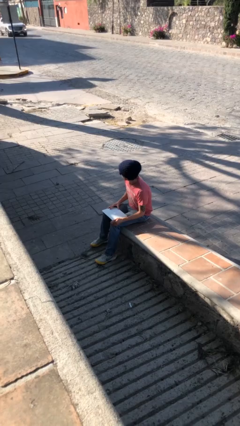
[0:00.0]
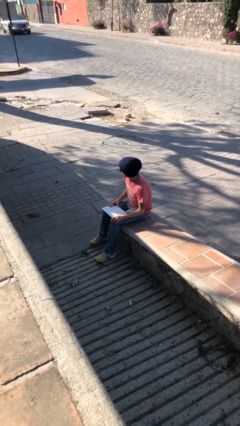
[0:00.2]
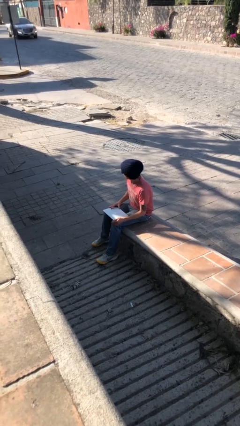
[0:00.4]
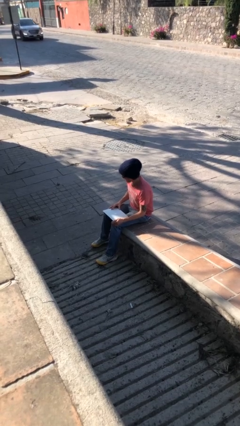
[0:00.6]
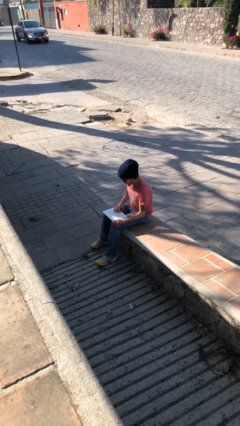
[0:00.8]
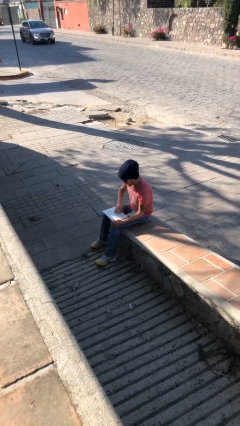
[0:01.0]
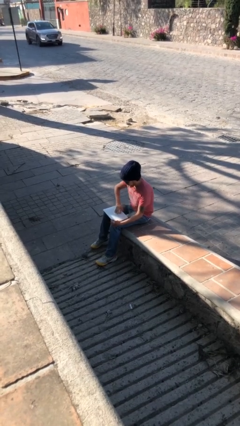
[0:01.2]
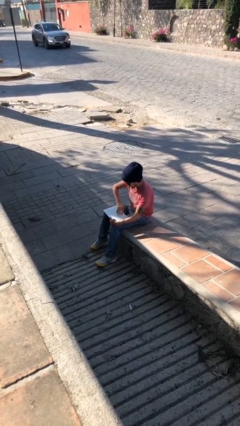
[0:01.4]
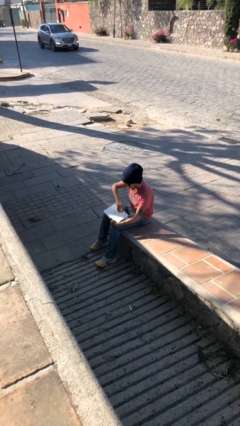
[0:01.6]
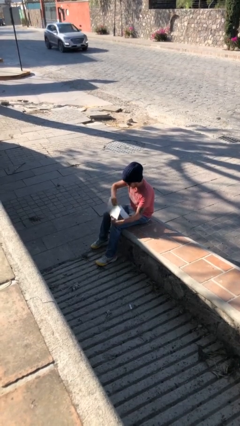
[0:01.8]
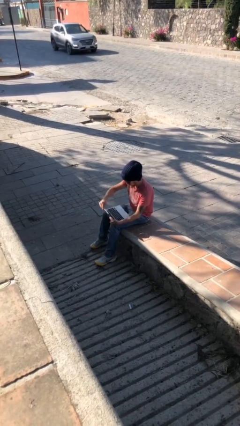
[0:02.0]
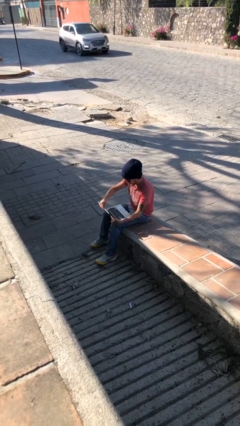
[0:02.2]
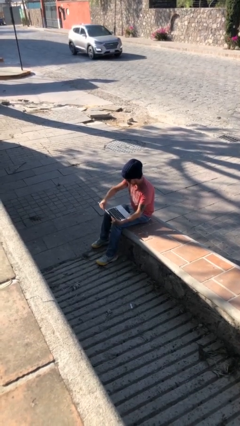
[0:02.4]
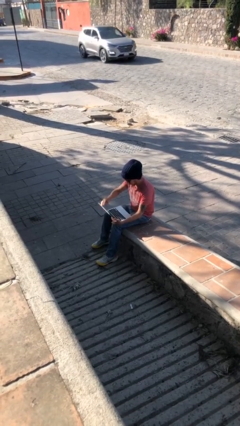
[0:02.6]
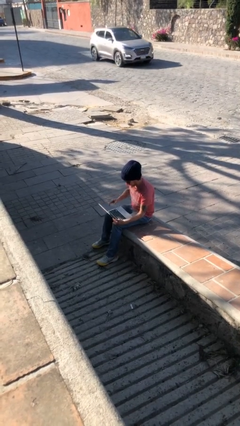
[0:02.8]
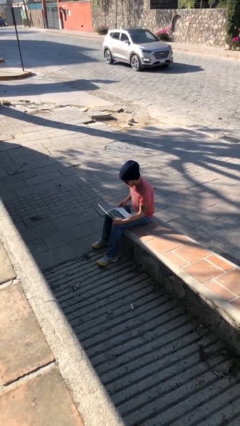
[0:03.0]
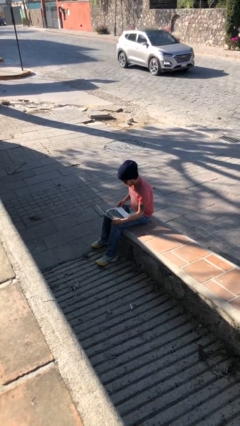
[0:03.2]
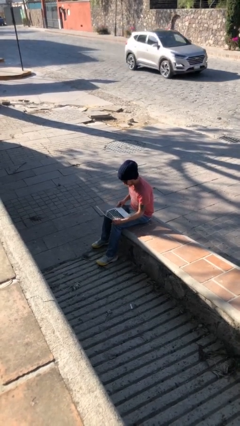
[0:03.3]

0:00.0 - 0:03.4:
person interacts with laptop

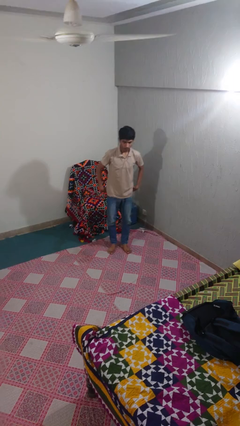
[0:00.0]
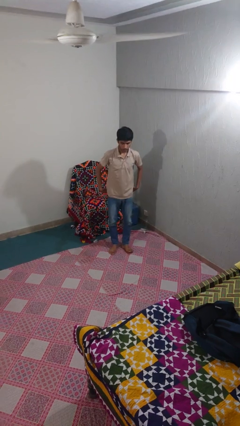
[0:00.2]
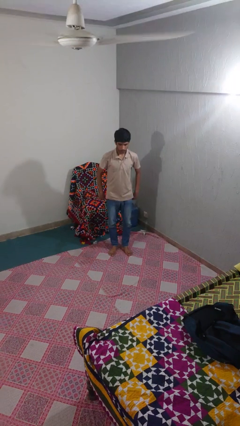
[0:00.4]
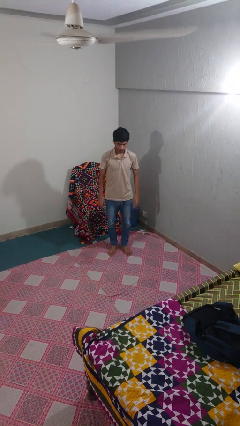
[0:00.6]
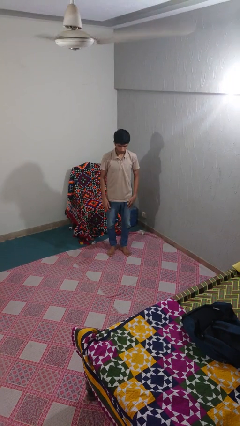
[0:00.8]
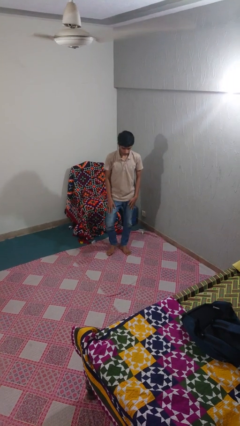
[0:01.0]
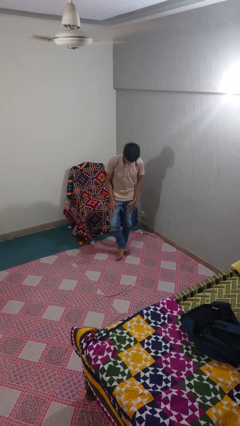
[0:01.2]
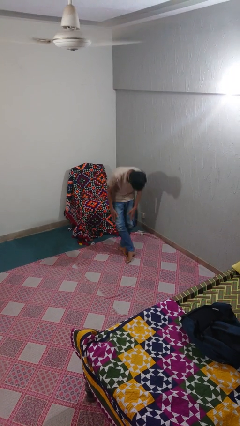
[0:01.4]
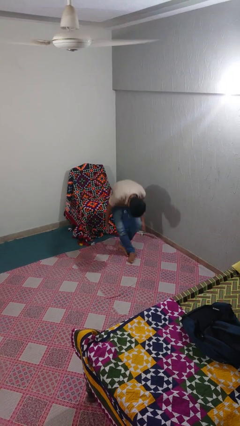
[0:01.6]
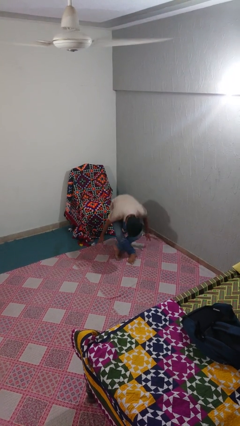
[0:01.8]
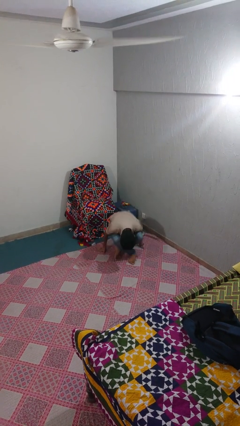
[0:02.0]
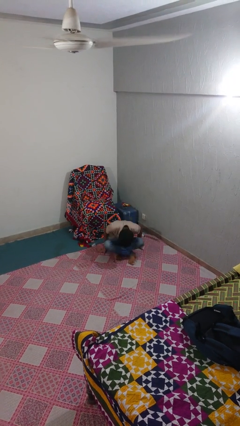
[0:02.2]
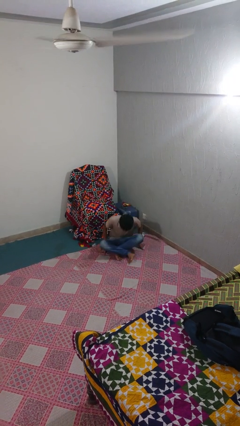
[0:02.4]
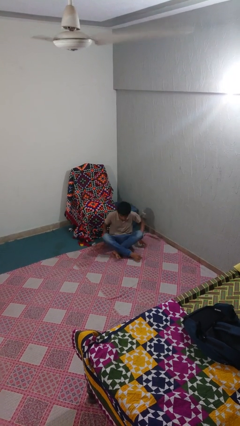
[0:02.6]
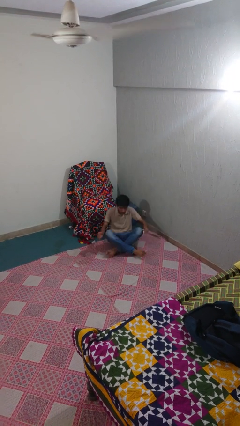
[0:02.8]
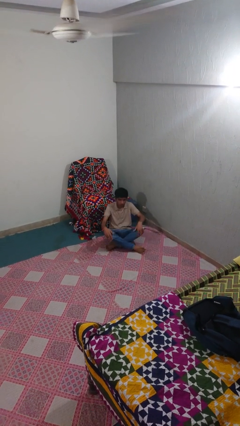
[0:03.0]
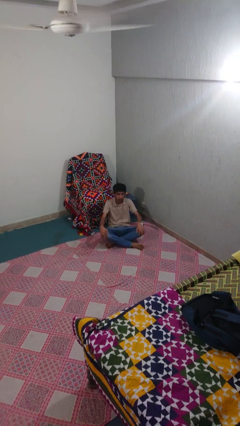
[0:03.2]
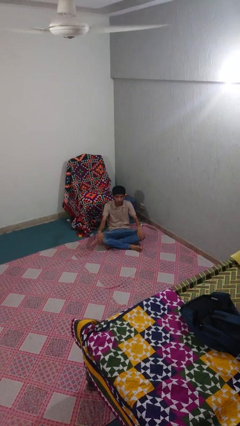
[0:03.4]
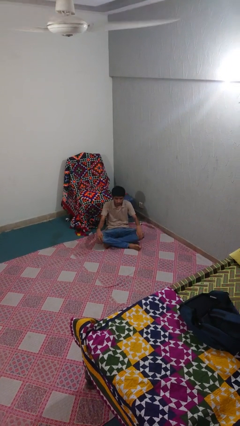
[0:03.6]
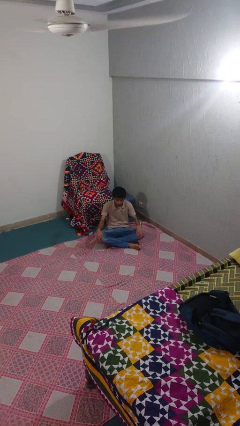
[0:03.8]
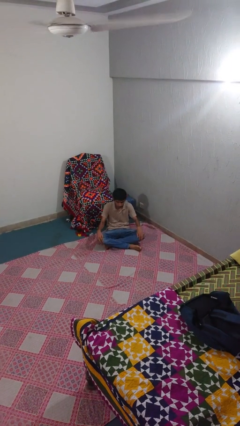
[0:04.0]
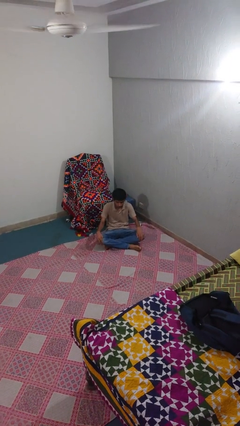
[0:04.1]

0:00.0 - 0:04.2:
person sits crisscross

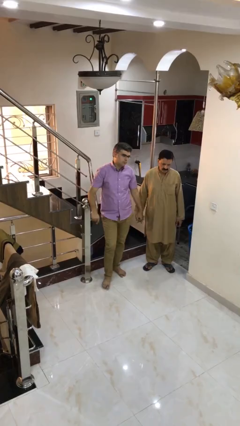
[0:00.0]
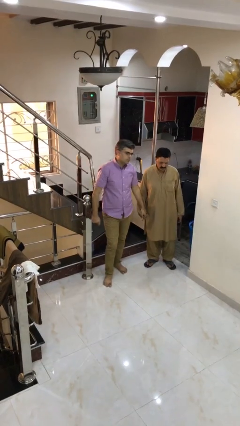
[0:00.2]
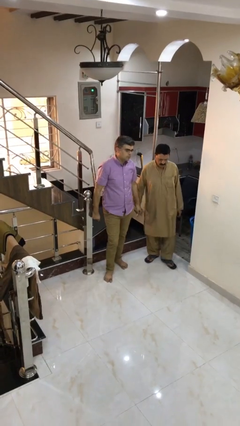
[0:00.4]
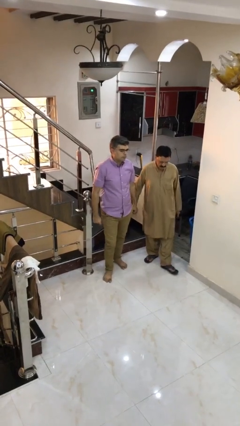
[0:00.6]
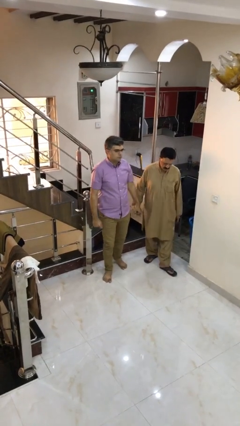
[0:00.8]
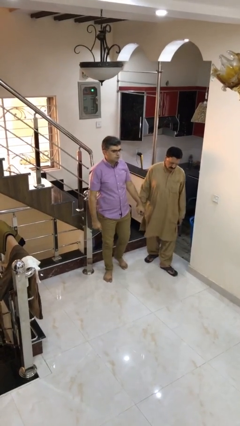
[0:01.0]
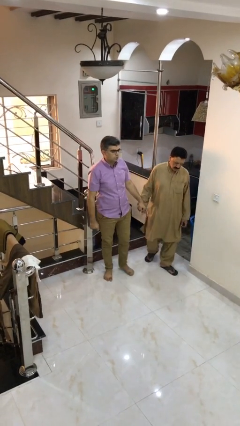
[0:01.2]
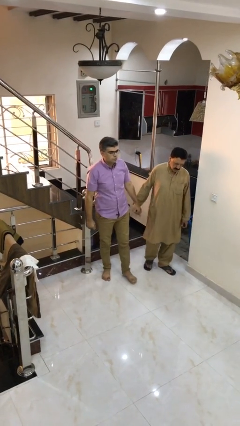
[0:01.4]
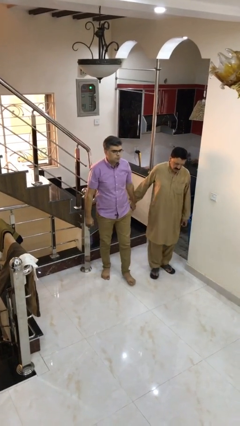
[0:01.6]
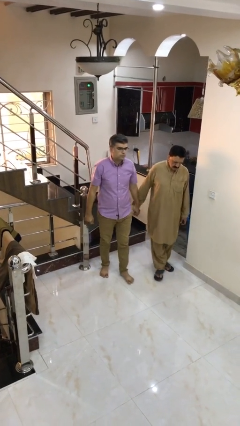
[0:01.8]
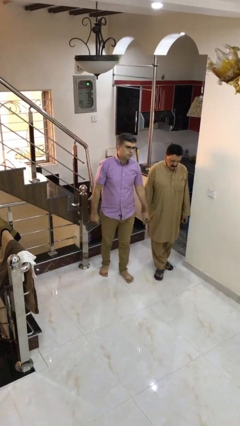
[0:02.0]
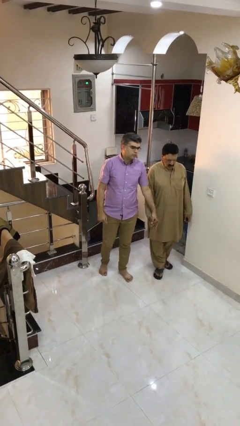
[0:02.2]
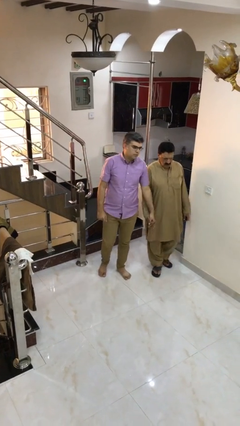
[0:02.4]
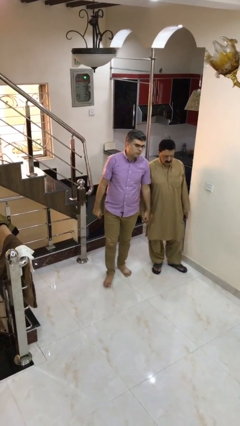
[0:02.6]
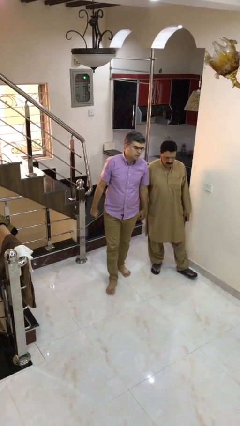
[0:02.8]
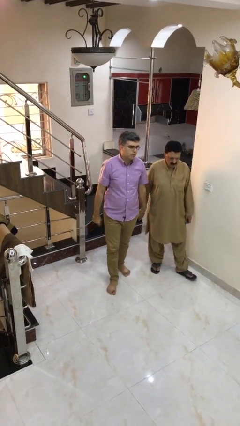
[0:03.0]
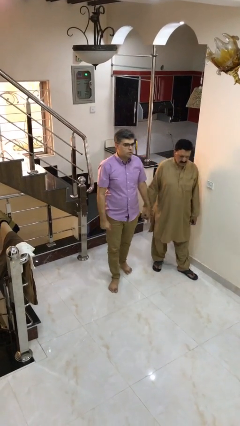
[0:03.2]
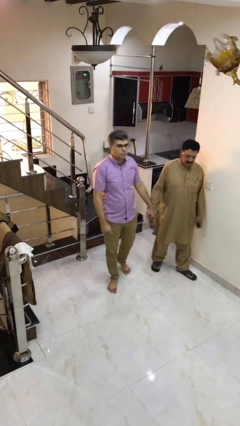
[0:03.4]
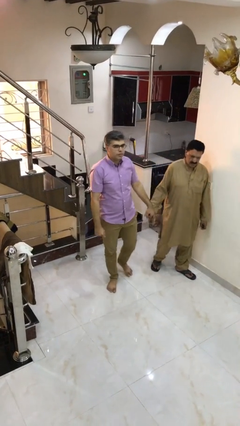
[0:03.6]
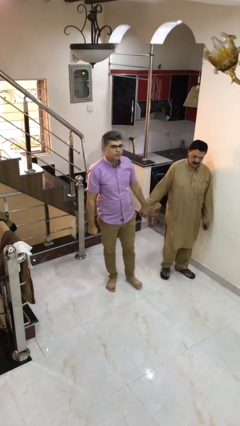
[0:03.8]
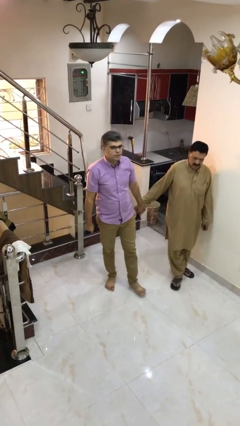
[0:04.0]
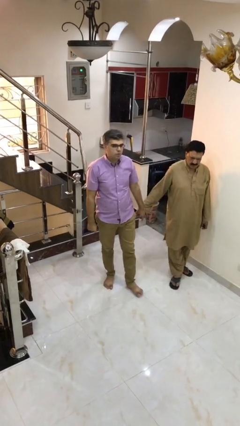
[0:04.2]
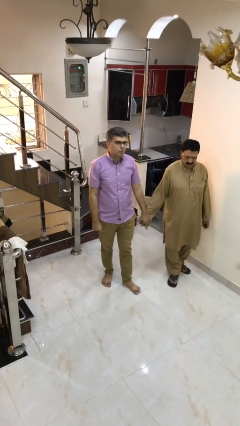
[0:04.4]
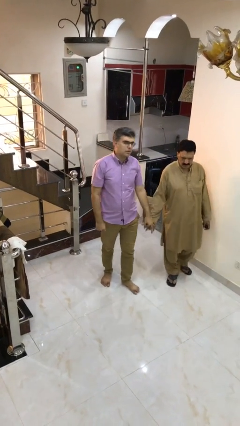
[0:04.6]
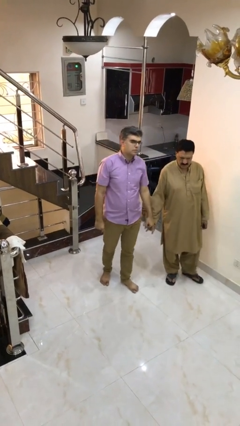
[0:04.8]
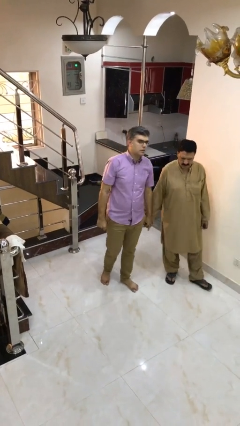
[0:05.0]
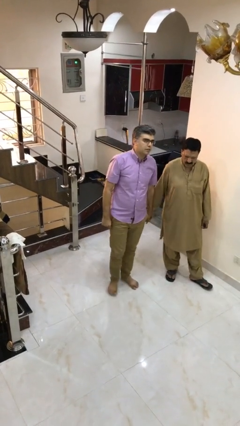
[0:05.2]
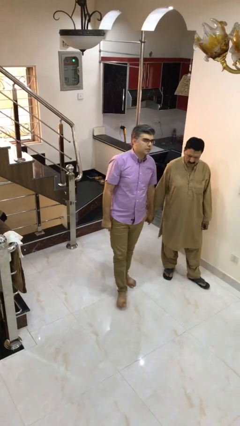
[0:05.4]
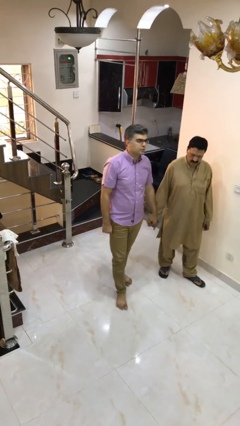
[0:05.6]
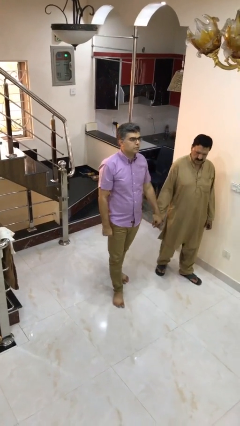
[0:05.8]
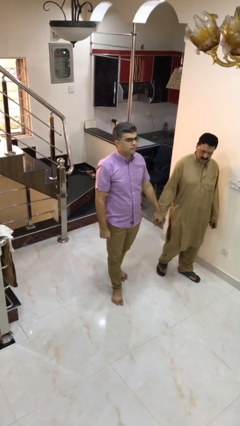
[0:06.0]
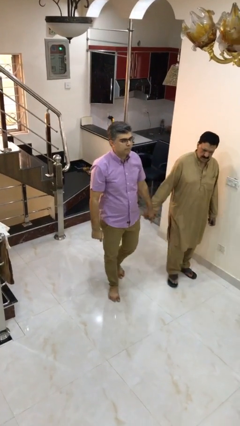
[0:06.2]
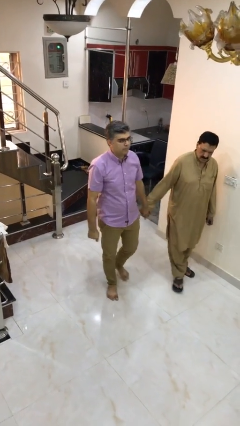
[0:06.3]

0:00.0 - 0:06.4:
person holds hand

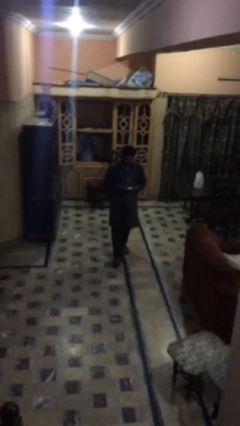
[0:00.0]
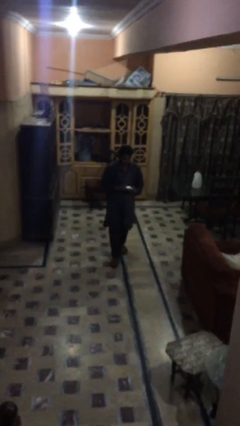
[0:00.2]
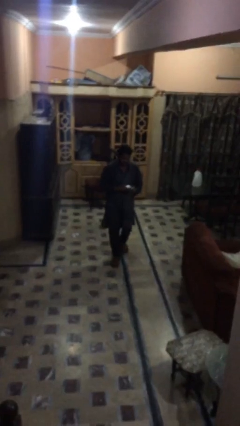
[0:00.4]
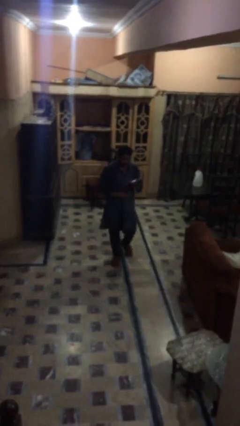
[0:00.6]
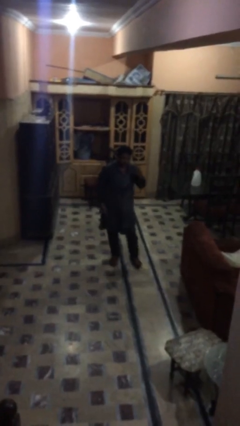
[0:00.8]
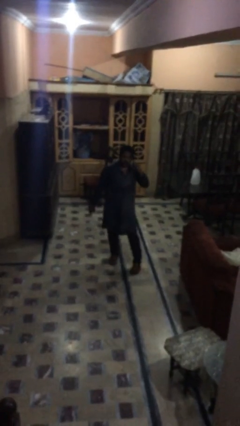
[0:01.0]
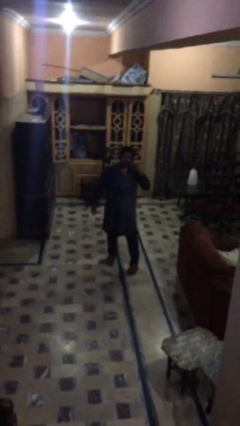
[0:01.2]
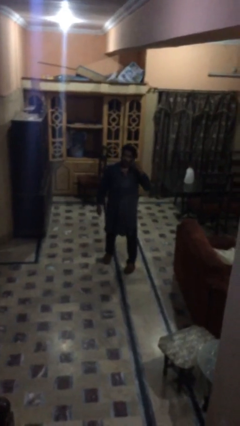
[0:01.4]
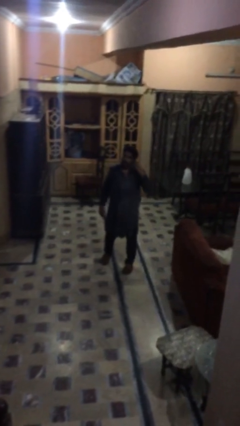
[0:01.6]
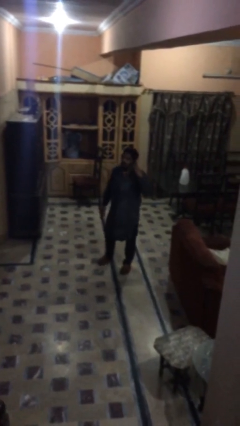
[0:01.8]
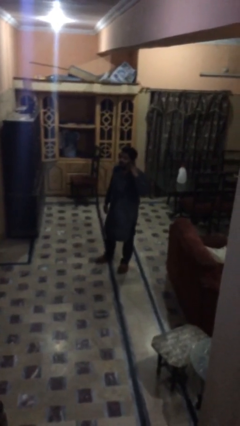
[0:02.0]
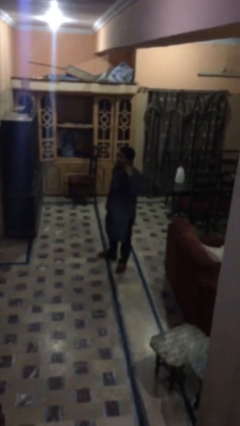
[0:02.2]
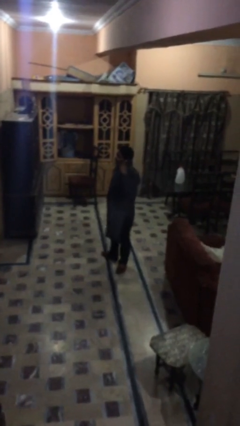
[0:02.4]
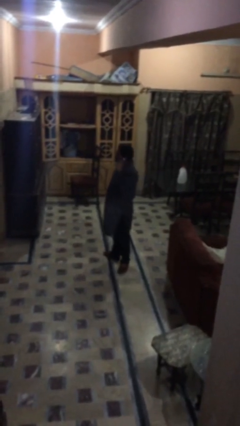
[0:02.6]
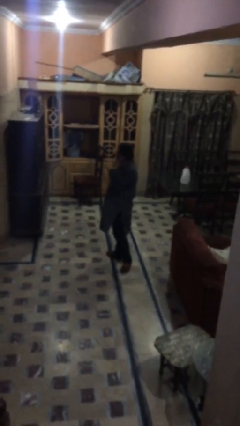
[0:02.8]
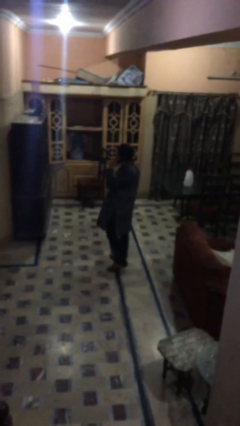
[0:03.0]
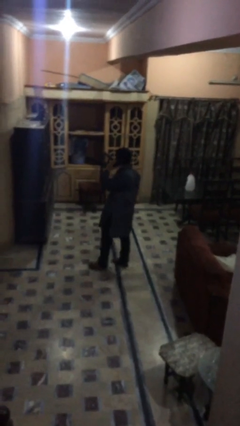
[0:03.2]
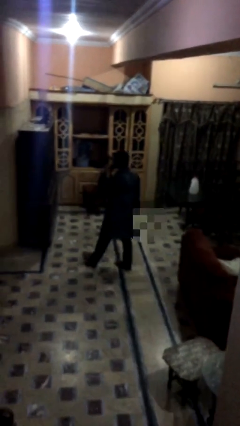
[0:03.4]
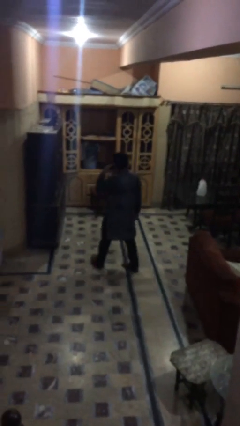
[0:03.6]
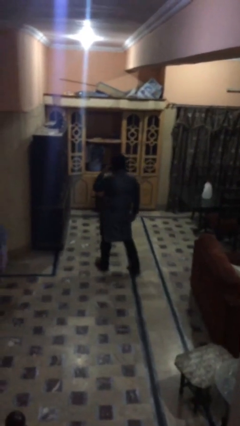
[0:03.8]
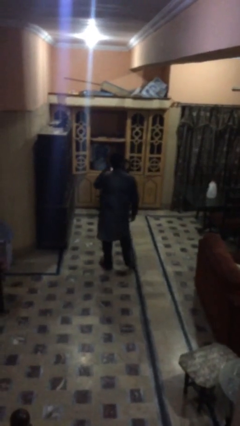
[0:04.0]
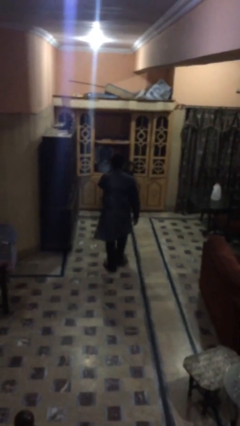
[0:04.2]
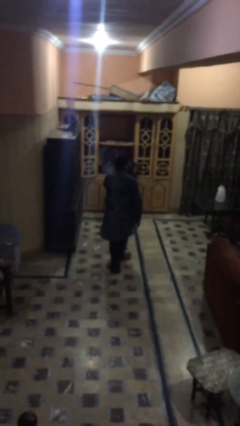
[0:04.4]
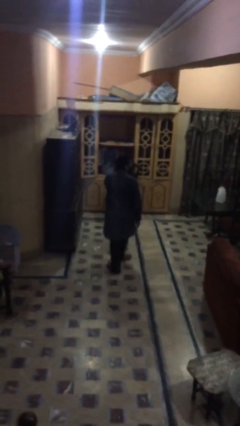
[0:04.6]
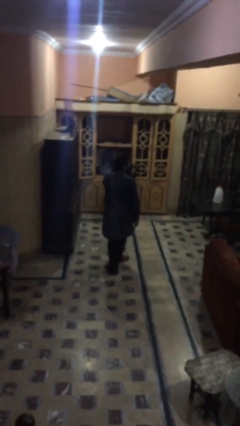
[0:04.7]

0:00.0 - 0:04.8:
person talks on phone
